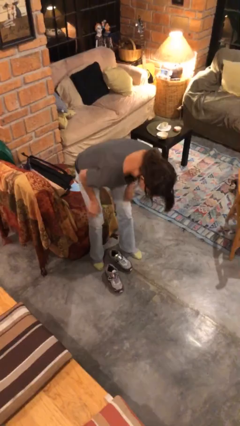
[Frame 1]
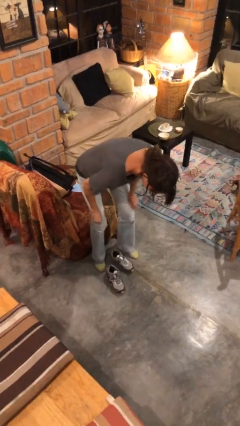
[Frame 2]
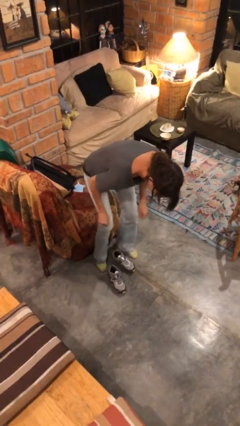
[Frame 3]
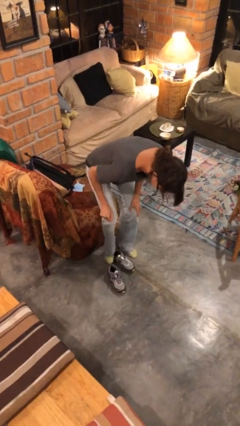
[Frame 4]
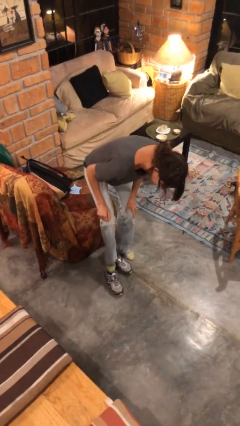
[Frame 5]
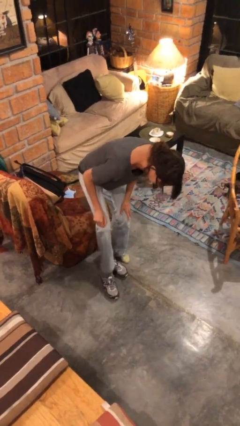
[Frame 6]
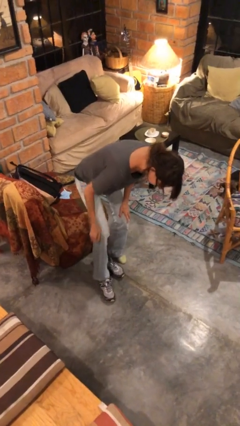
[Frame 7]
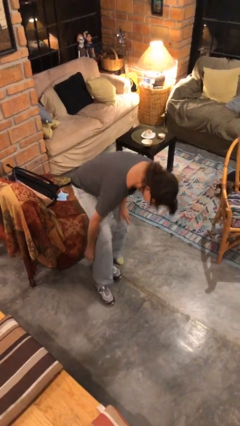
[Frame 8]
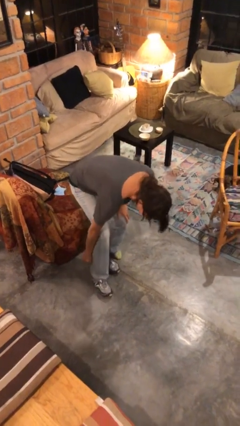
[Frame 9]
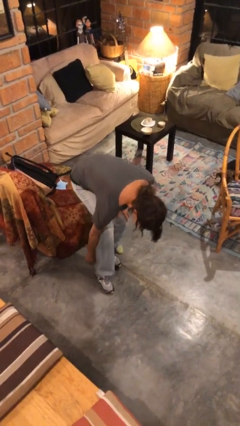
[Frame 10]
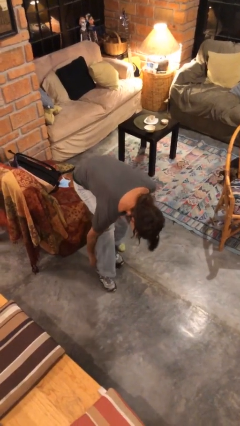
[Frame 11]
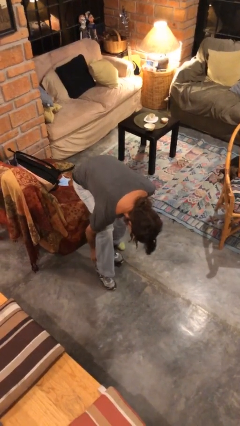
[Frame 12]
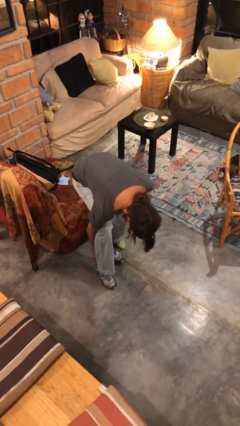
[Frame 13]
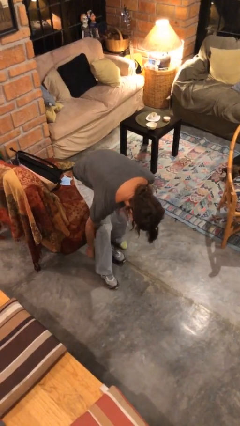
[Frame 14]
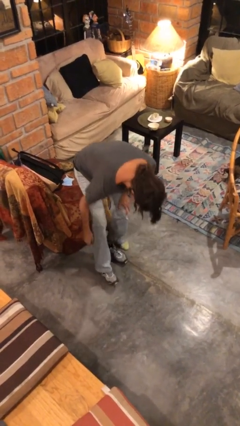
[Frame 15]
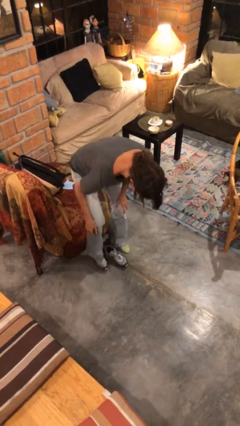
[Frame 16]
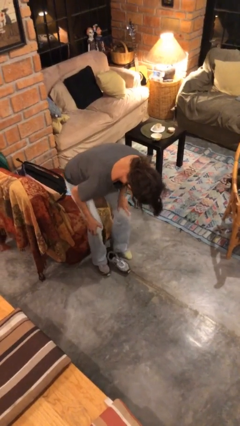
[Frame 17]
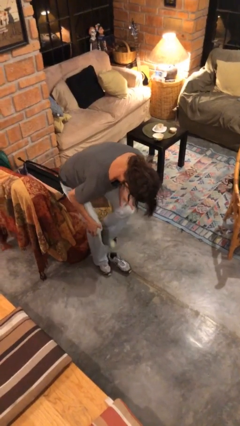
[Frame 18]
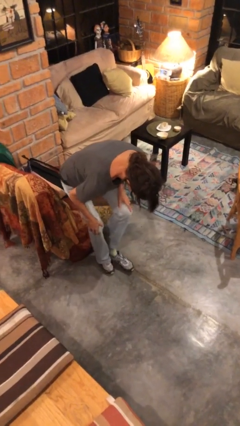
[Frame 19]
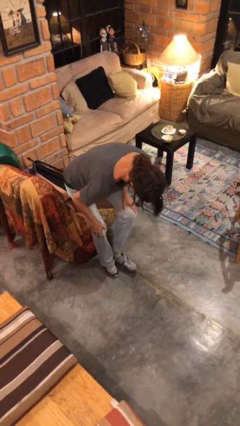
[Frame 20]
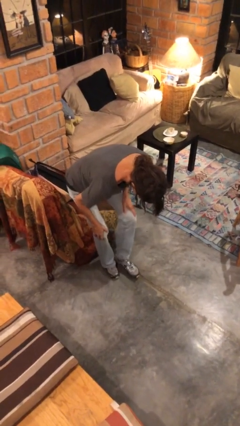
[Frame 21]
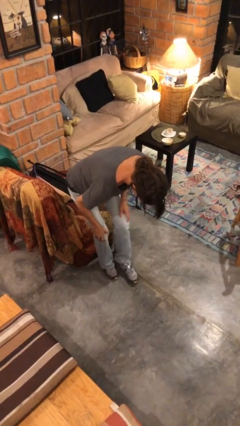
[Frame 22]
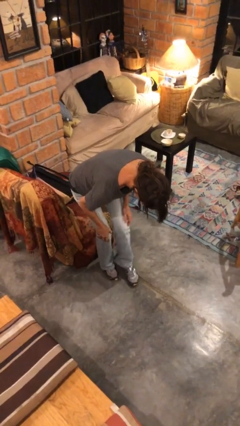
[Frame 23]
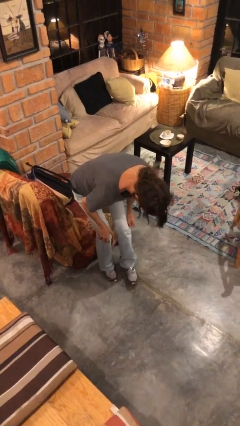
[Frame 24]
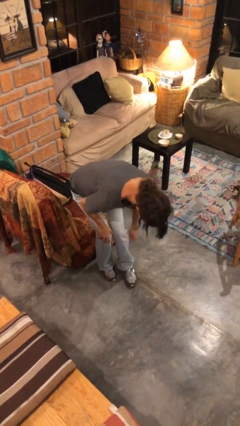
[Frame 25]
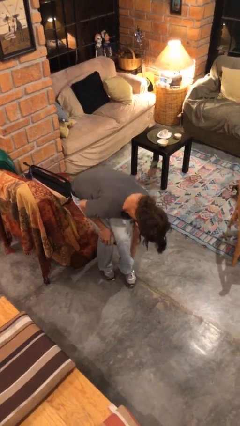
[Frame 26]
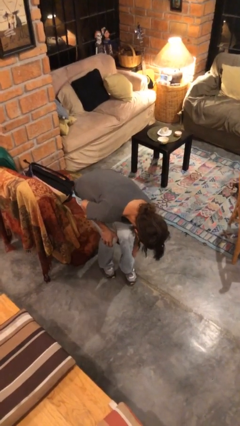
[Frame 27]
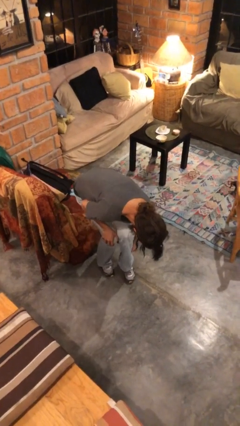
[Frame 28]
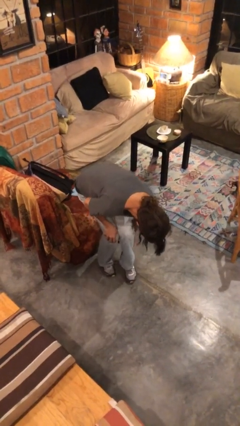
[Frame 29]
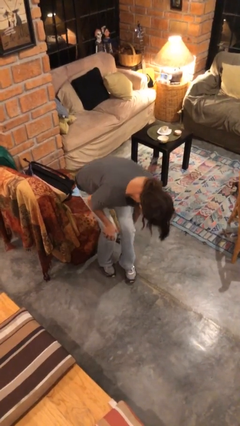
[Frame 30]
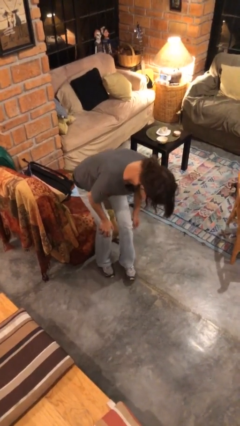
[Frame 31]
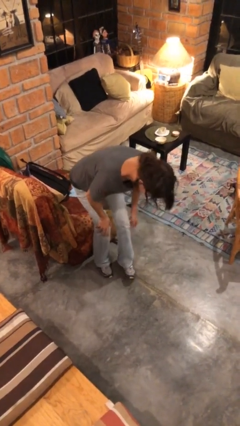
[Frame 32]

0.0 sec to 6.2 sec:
person puts on shoes

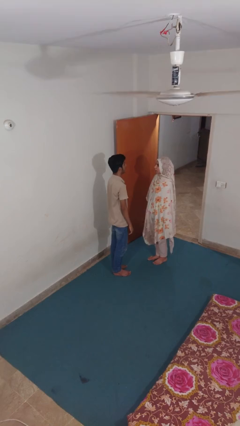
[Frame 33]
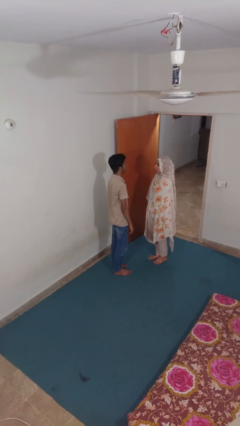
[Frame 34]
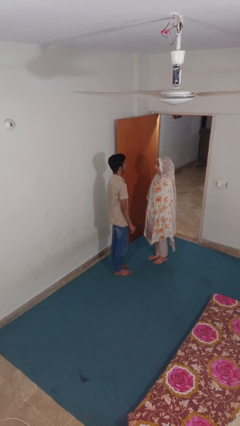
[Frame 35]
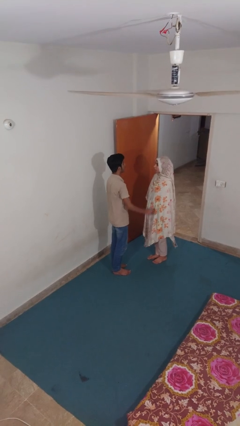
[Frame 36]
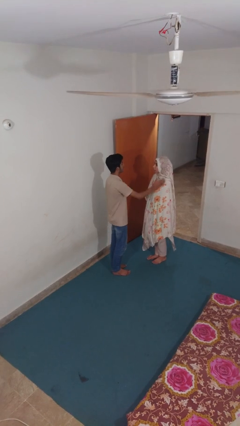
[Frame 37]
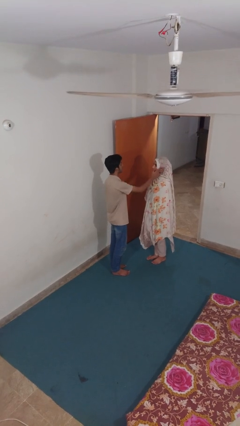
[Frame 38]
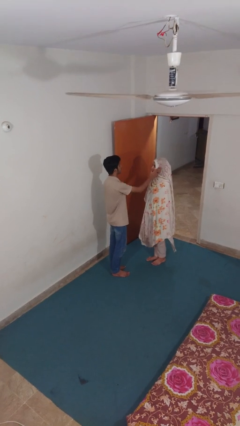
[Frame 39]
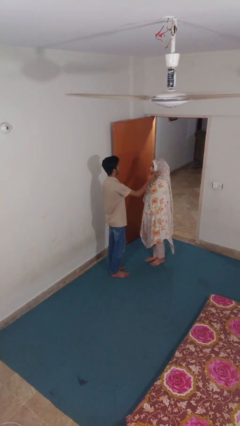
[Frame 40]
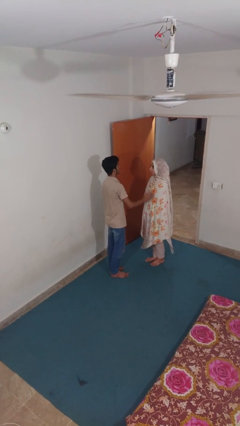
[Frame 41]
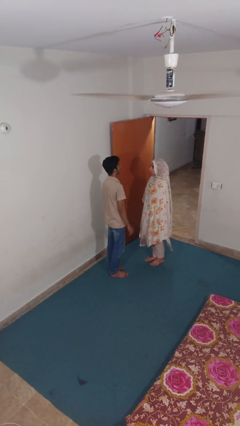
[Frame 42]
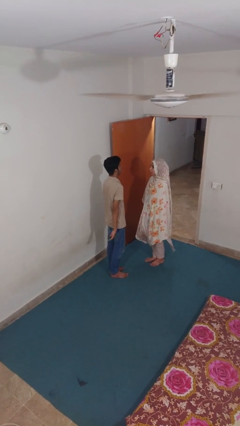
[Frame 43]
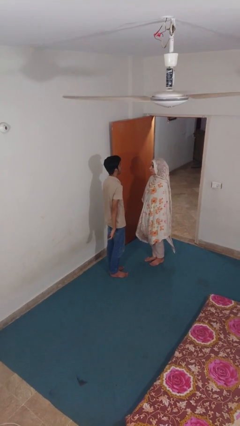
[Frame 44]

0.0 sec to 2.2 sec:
person touches face of person

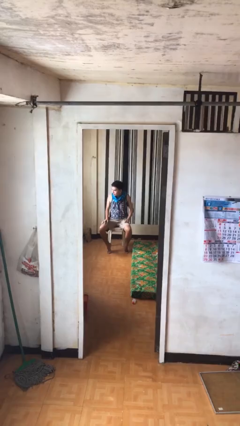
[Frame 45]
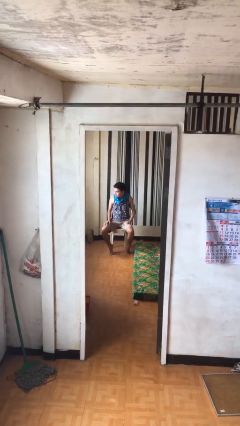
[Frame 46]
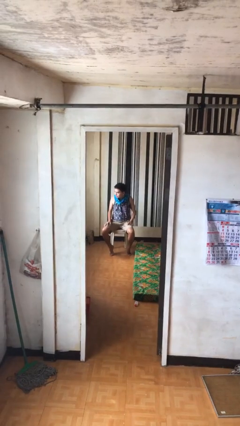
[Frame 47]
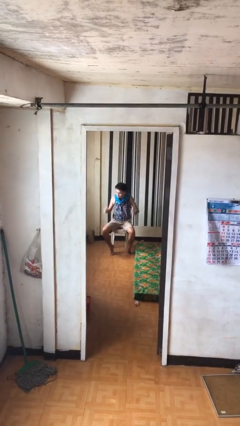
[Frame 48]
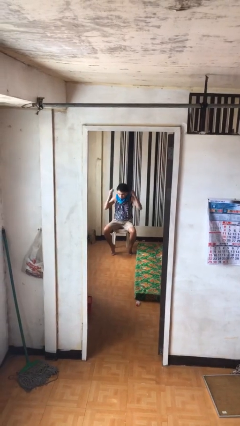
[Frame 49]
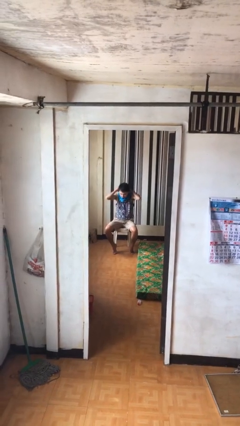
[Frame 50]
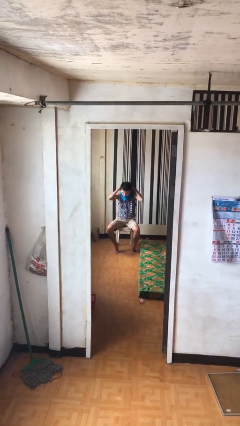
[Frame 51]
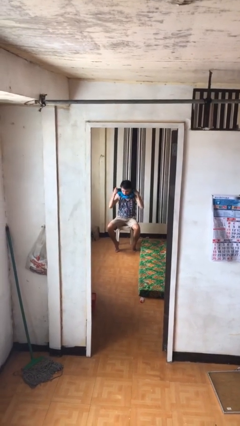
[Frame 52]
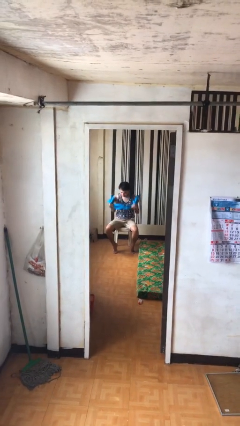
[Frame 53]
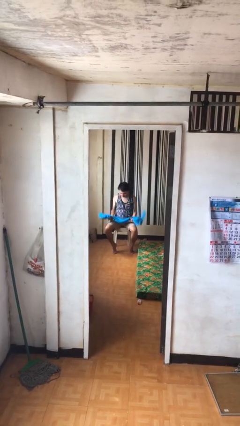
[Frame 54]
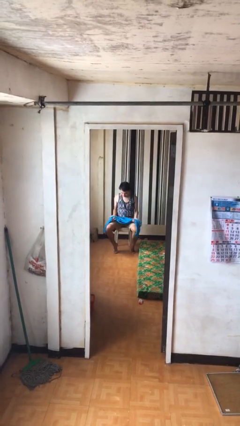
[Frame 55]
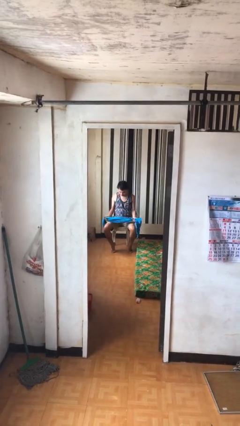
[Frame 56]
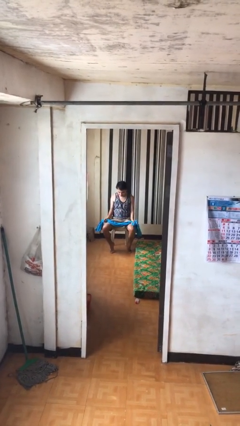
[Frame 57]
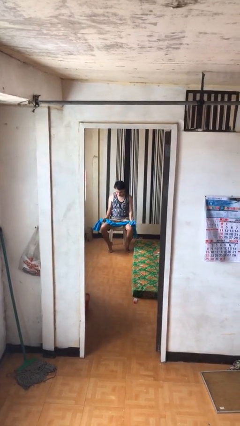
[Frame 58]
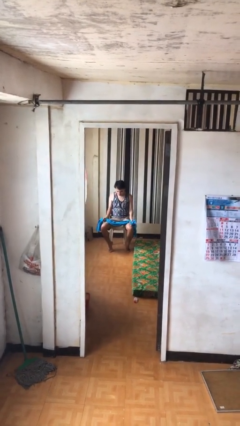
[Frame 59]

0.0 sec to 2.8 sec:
person takes off scarf

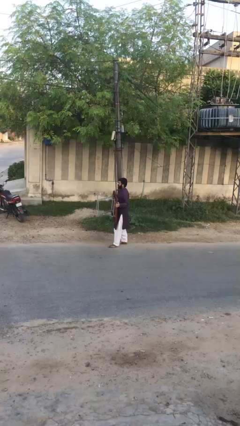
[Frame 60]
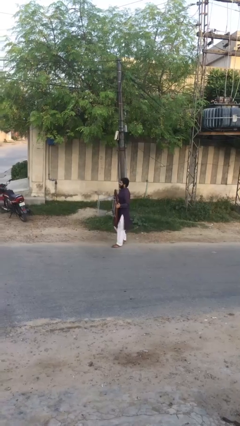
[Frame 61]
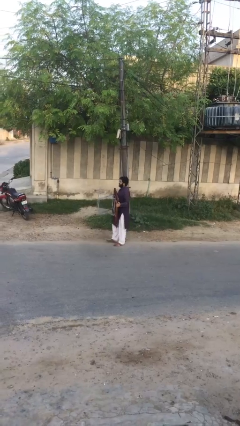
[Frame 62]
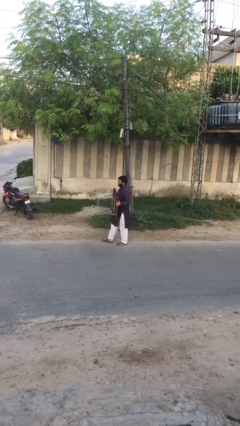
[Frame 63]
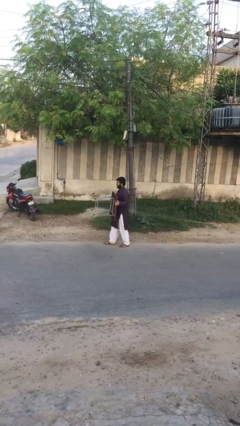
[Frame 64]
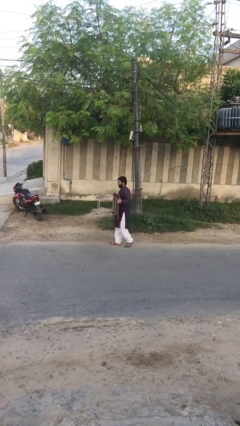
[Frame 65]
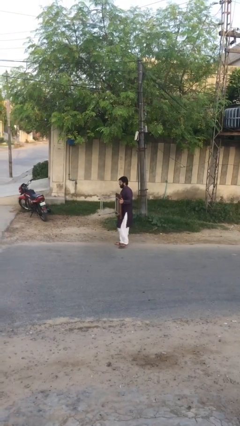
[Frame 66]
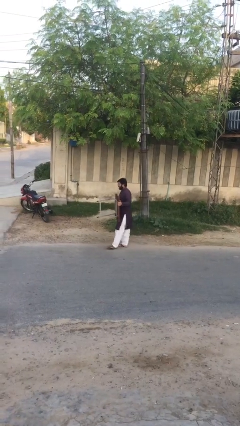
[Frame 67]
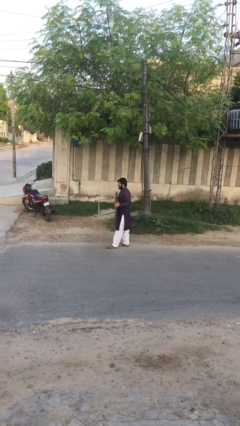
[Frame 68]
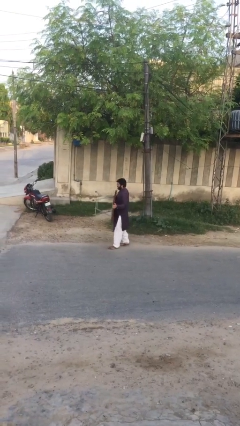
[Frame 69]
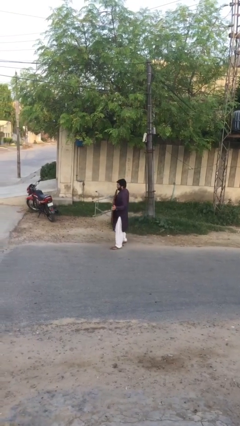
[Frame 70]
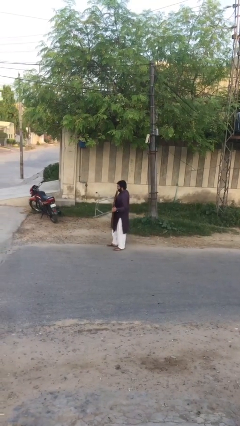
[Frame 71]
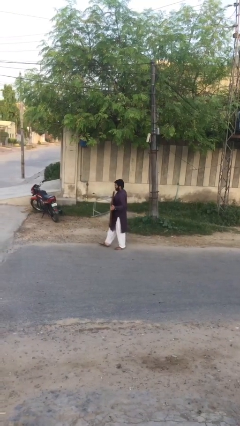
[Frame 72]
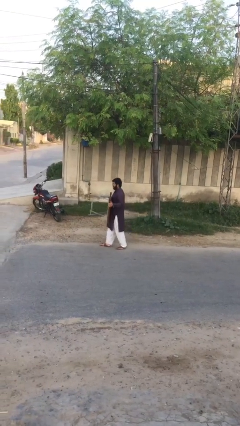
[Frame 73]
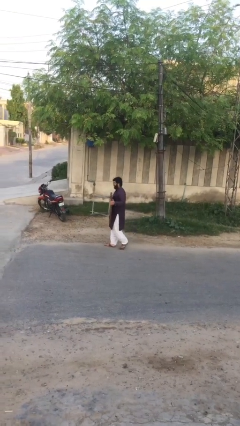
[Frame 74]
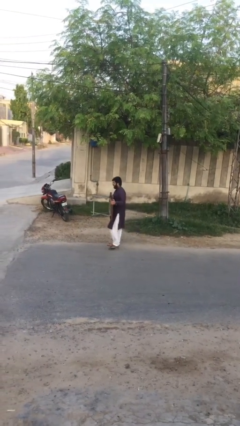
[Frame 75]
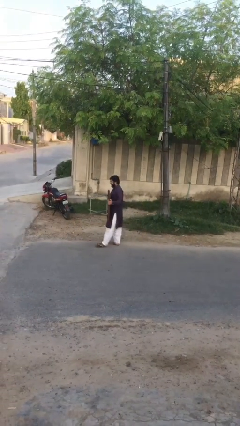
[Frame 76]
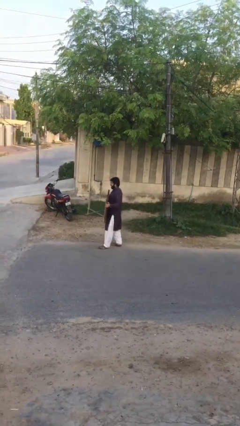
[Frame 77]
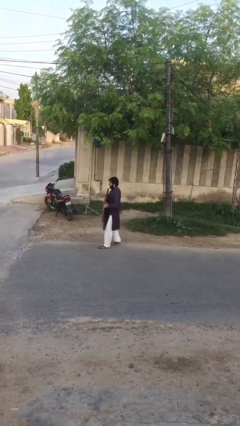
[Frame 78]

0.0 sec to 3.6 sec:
person carries heavy object

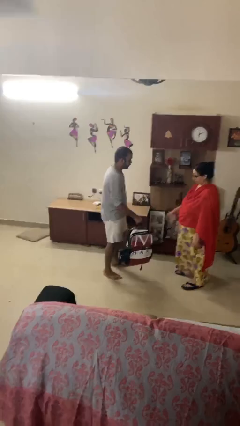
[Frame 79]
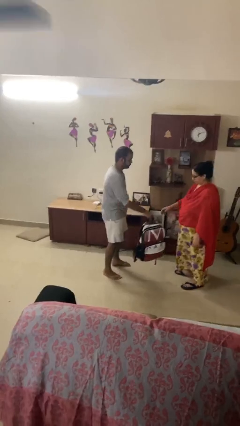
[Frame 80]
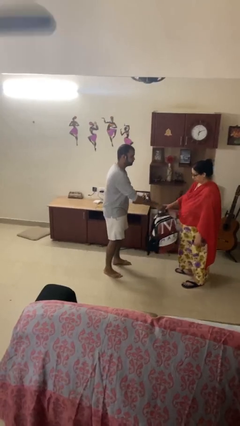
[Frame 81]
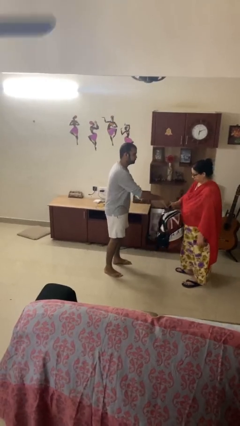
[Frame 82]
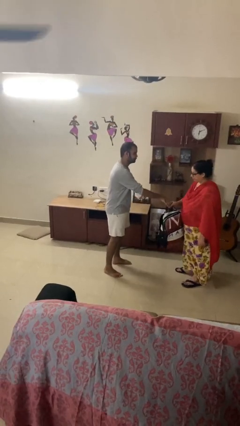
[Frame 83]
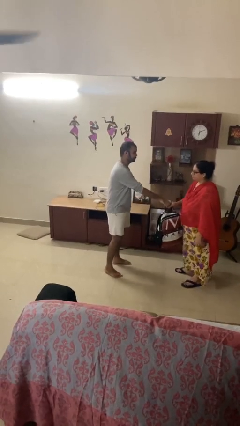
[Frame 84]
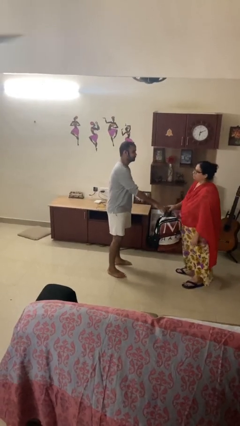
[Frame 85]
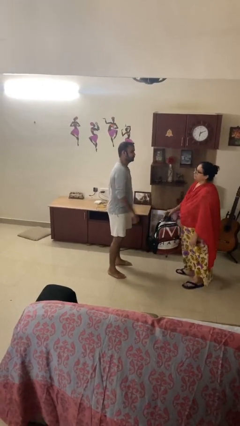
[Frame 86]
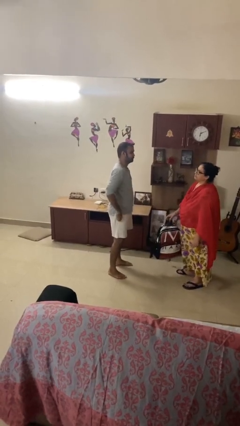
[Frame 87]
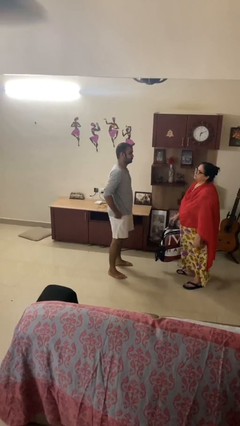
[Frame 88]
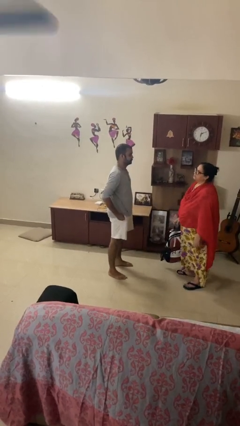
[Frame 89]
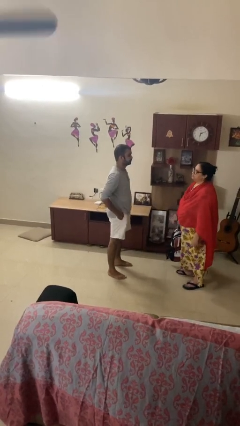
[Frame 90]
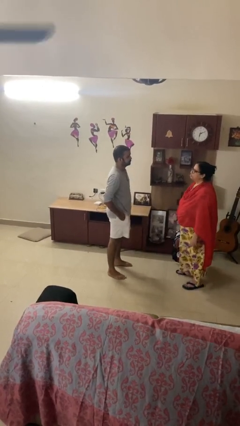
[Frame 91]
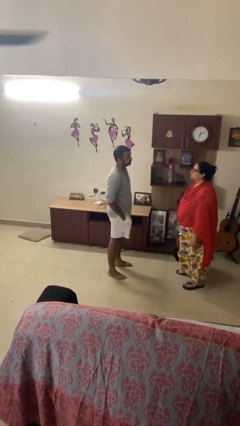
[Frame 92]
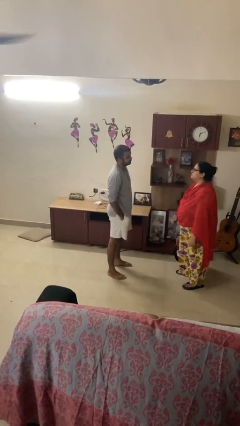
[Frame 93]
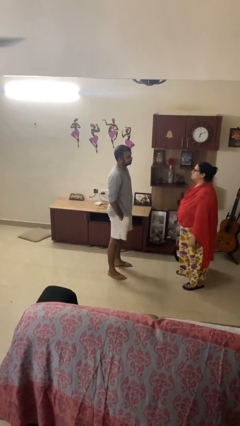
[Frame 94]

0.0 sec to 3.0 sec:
person transfers object to person
